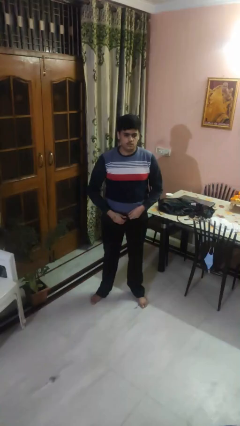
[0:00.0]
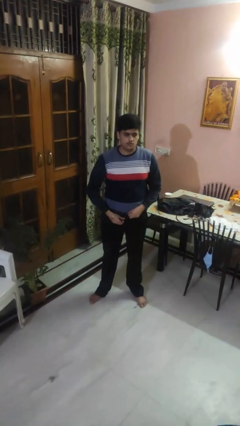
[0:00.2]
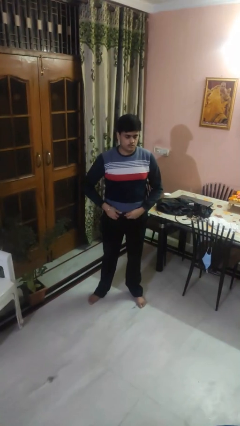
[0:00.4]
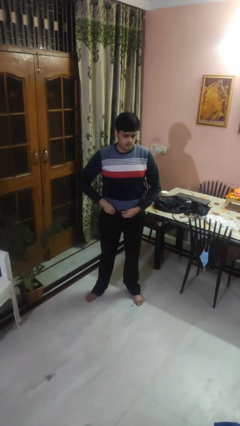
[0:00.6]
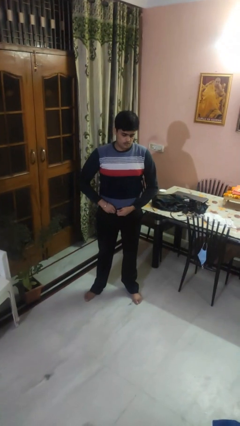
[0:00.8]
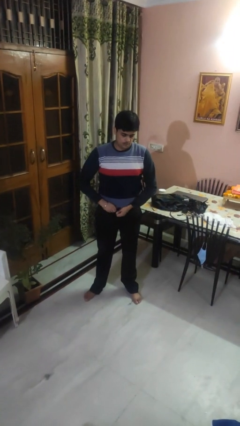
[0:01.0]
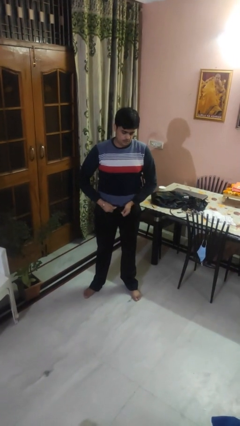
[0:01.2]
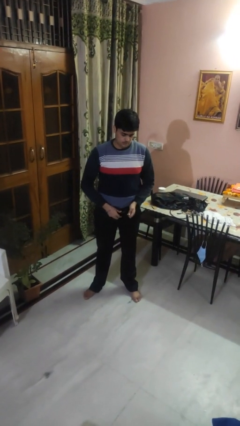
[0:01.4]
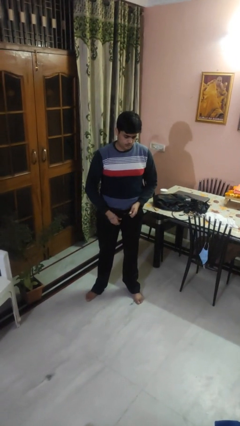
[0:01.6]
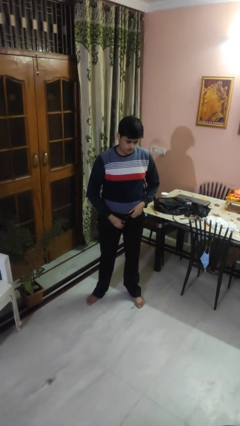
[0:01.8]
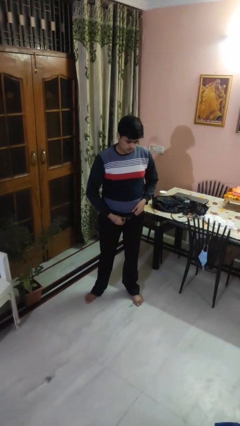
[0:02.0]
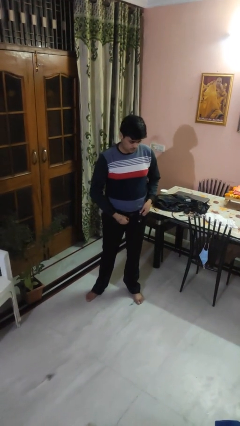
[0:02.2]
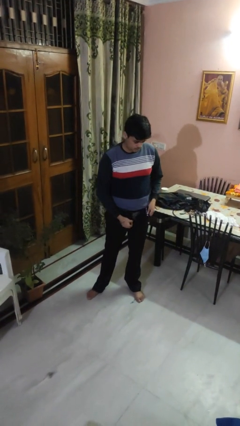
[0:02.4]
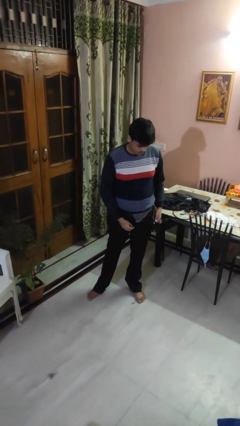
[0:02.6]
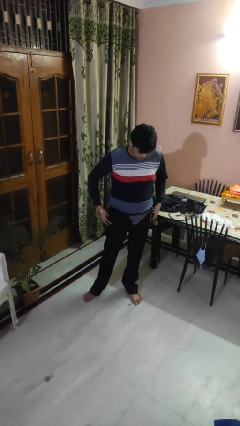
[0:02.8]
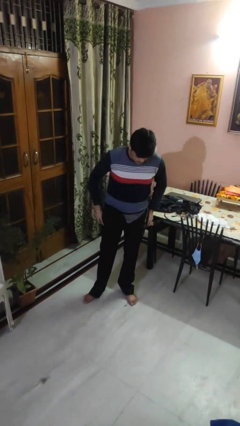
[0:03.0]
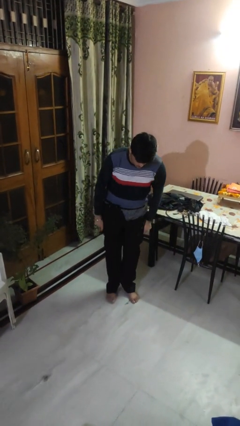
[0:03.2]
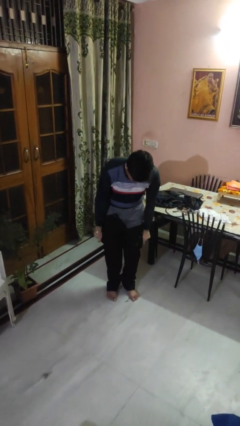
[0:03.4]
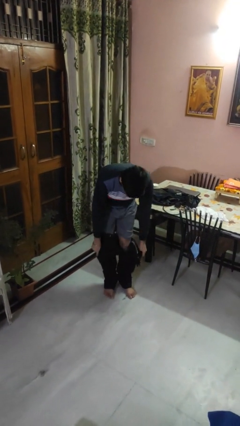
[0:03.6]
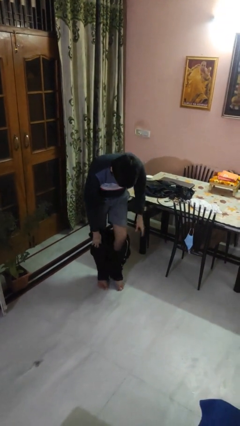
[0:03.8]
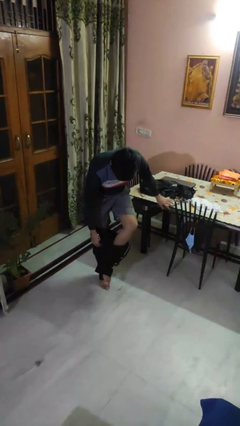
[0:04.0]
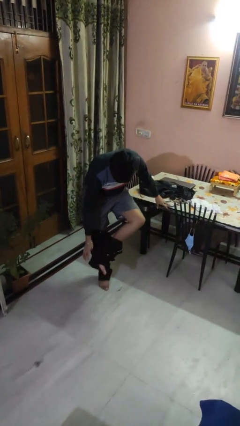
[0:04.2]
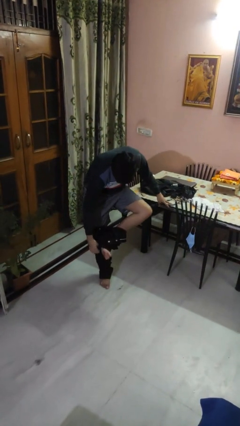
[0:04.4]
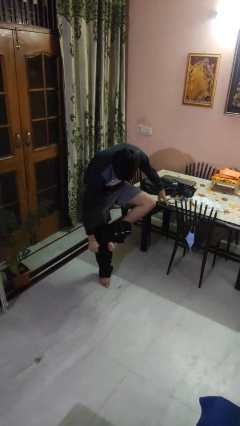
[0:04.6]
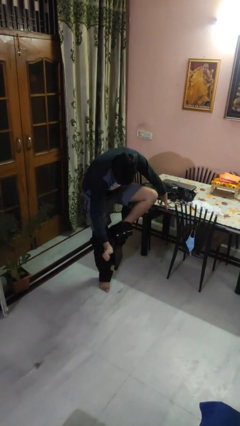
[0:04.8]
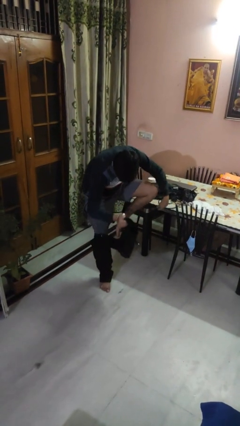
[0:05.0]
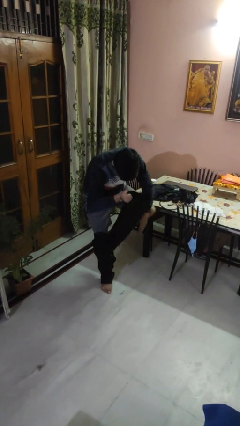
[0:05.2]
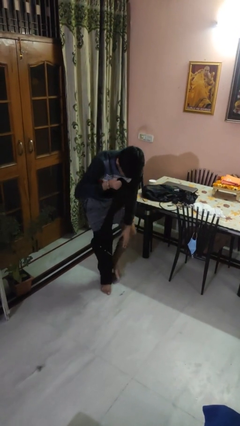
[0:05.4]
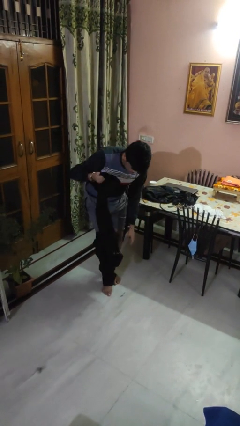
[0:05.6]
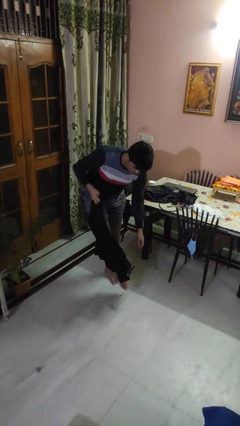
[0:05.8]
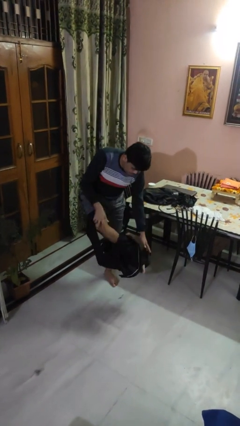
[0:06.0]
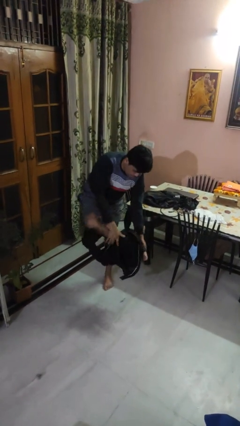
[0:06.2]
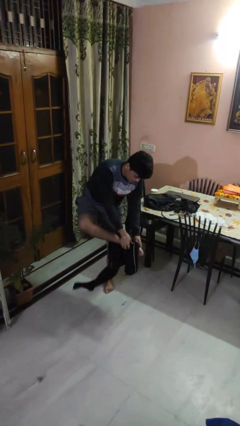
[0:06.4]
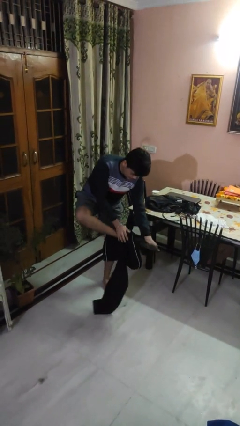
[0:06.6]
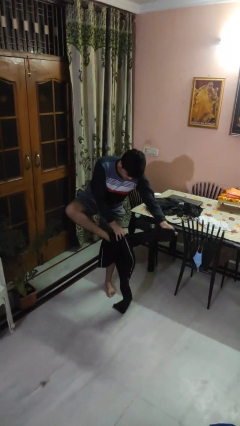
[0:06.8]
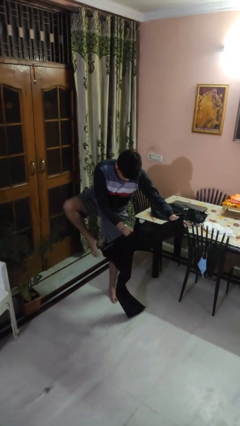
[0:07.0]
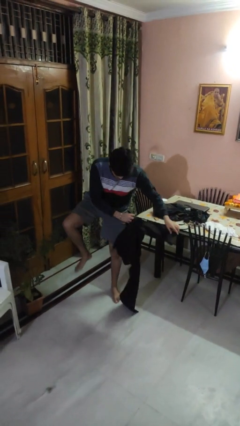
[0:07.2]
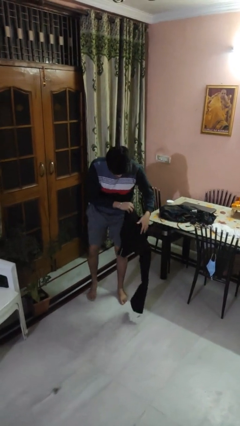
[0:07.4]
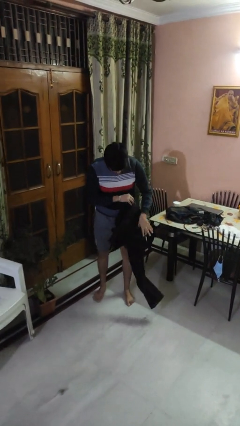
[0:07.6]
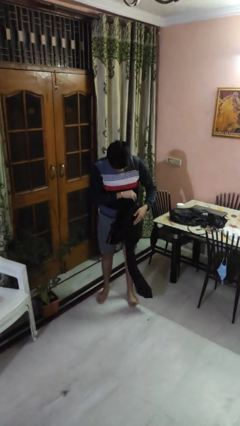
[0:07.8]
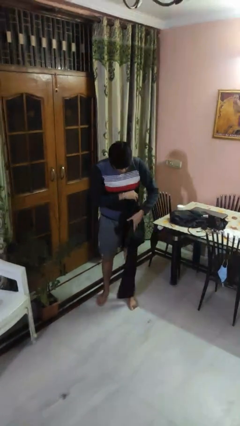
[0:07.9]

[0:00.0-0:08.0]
person takes off pants

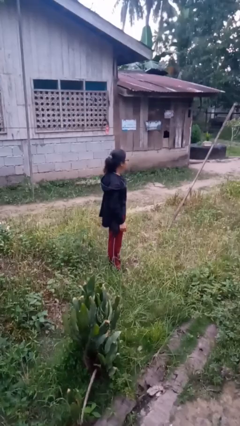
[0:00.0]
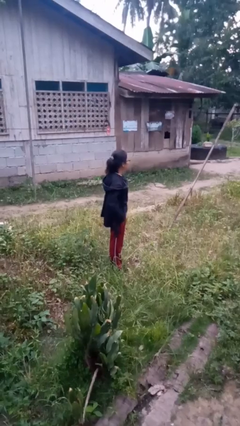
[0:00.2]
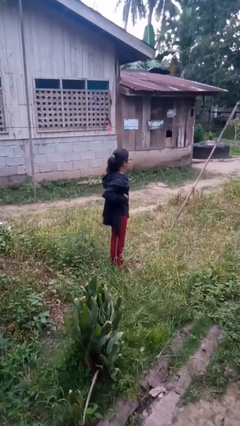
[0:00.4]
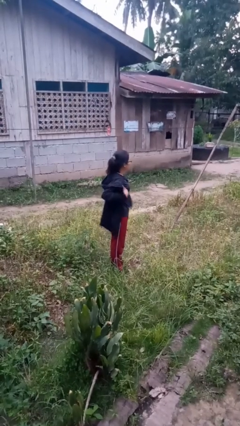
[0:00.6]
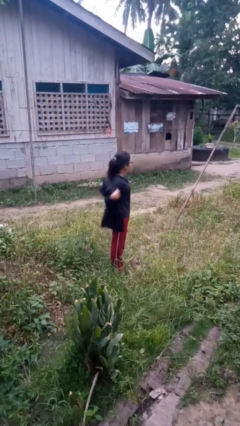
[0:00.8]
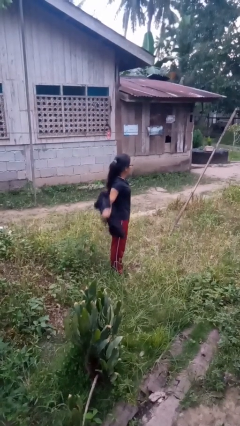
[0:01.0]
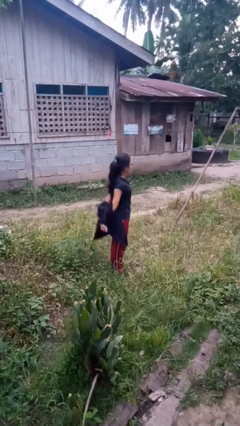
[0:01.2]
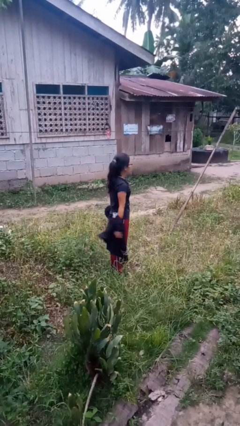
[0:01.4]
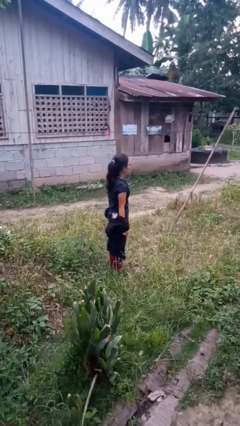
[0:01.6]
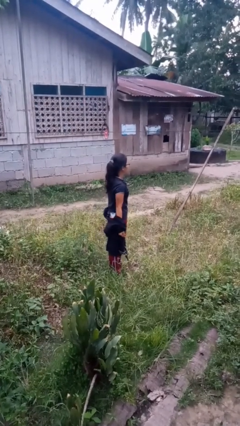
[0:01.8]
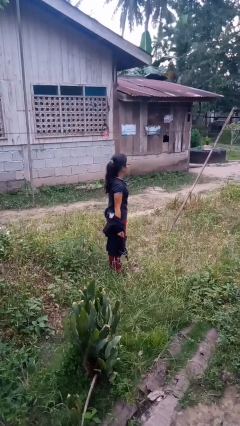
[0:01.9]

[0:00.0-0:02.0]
person takes off jacket

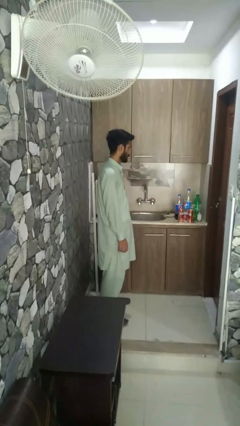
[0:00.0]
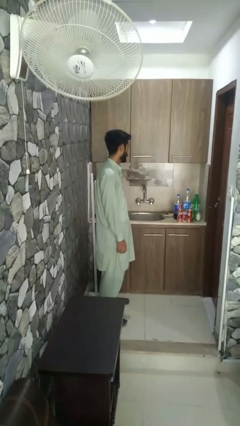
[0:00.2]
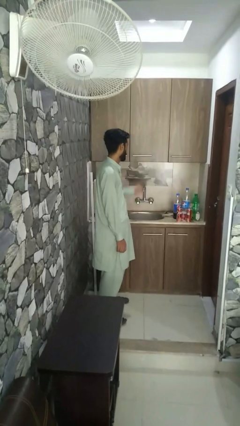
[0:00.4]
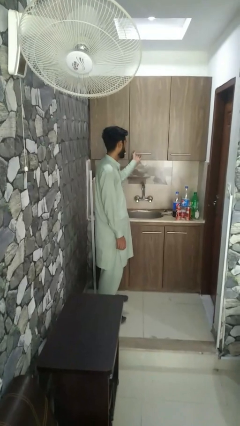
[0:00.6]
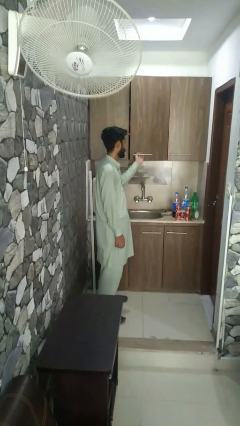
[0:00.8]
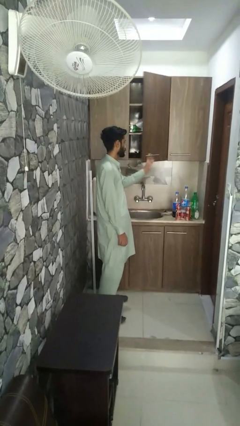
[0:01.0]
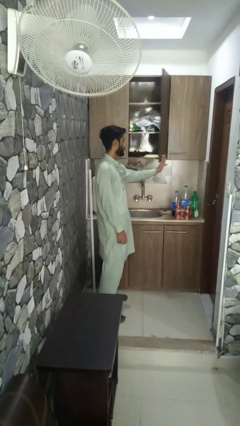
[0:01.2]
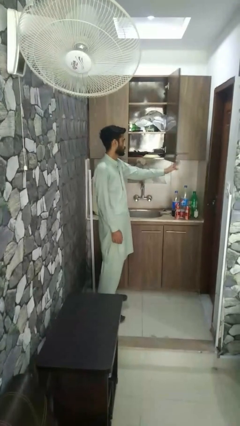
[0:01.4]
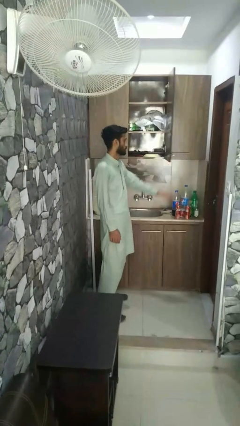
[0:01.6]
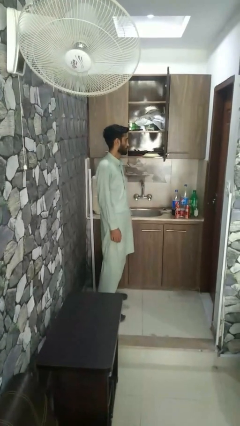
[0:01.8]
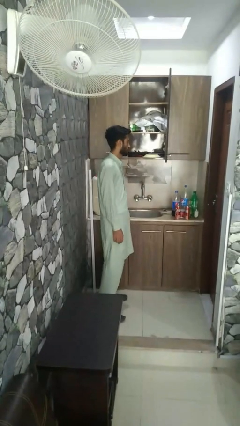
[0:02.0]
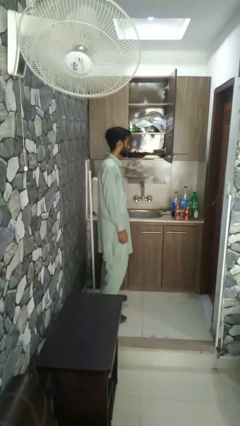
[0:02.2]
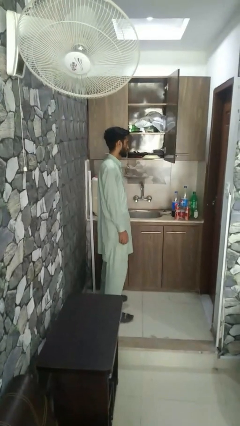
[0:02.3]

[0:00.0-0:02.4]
person opens closet door

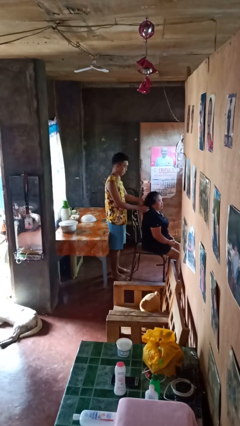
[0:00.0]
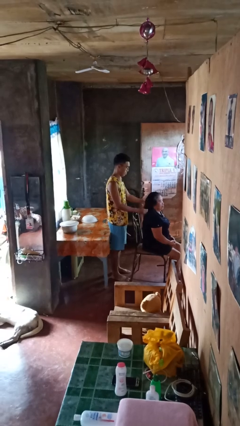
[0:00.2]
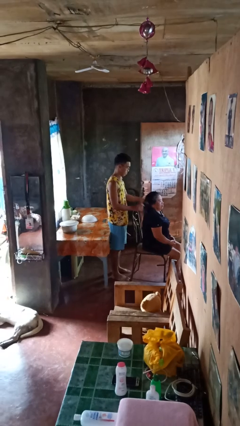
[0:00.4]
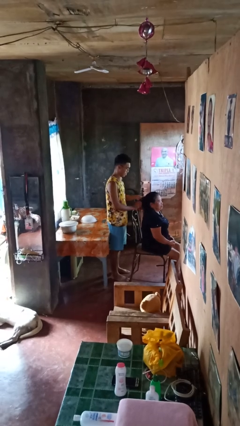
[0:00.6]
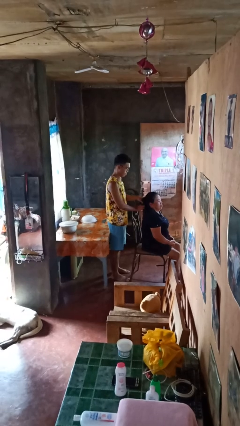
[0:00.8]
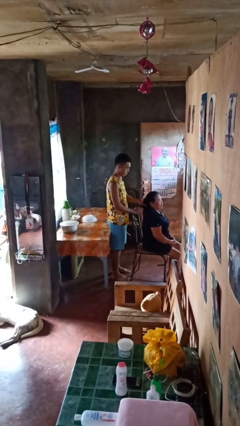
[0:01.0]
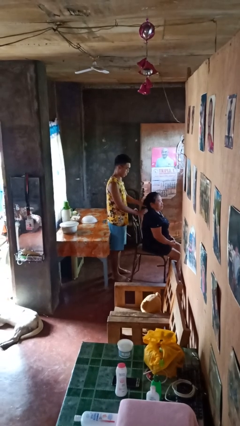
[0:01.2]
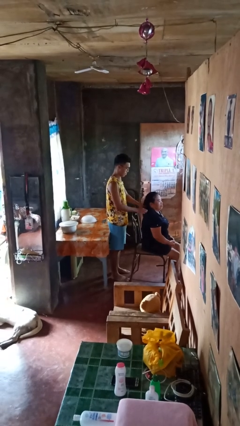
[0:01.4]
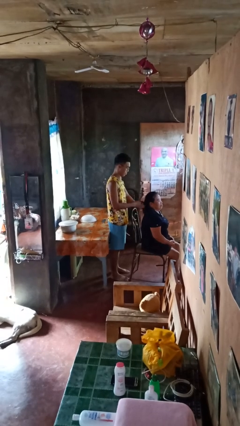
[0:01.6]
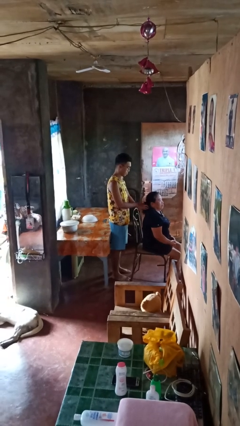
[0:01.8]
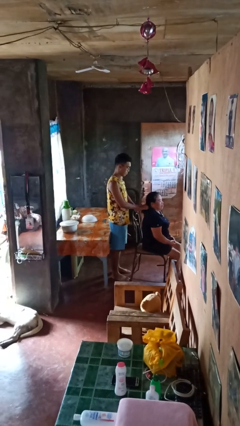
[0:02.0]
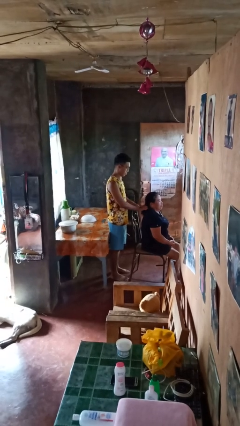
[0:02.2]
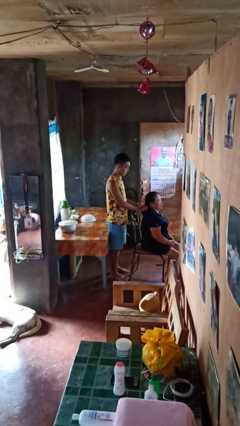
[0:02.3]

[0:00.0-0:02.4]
person braids hair of person

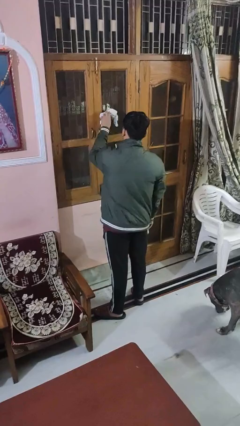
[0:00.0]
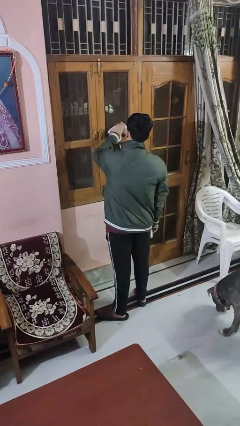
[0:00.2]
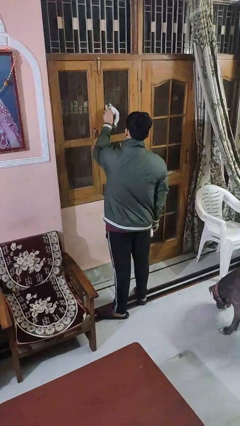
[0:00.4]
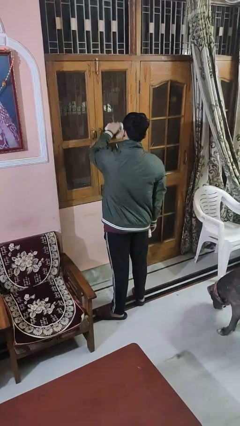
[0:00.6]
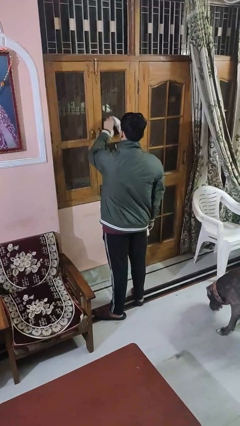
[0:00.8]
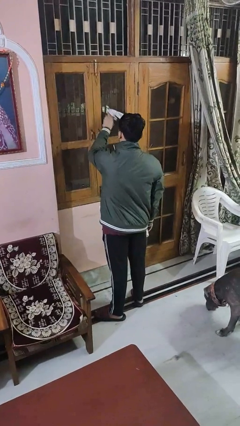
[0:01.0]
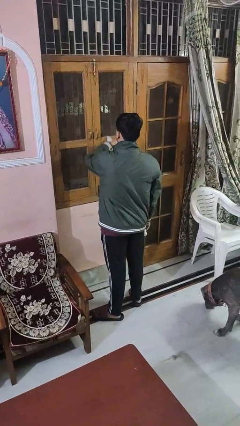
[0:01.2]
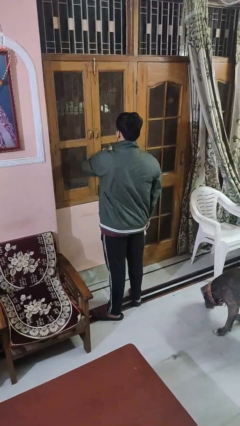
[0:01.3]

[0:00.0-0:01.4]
person washes window

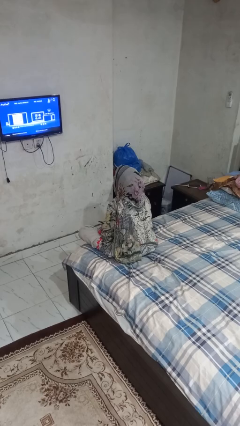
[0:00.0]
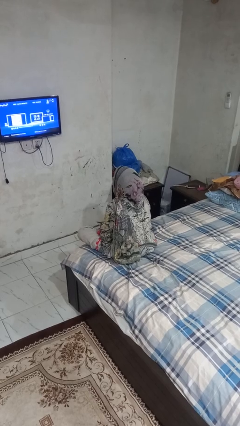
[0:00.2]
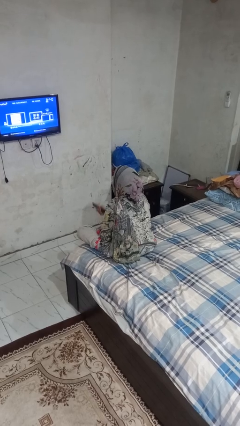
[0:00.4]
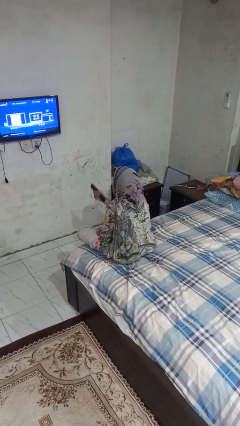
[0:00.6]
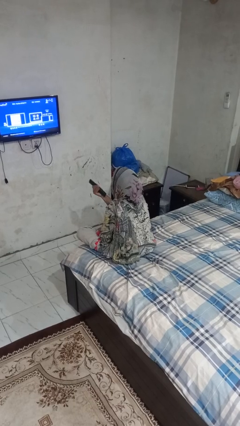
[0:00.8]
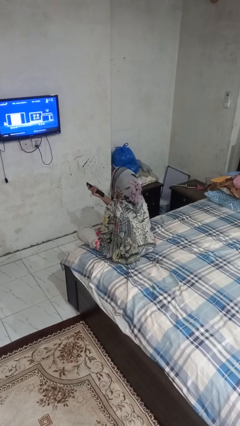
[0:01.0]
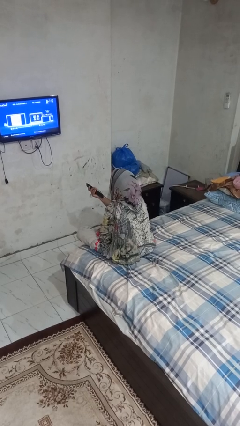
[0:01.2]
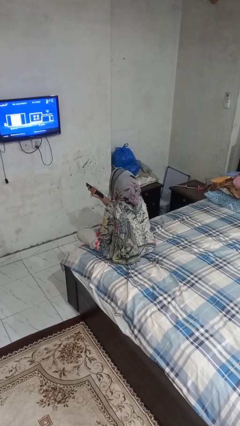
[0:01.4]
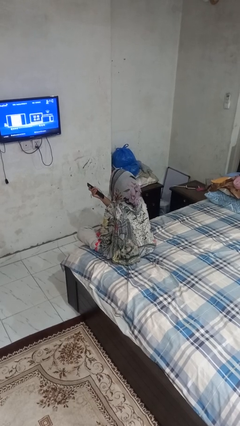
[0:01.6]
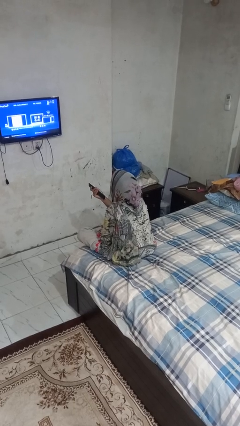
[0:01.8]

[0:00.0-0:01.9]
person uses television remote
